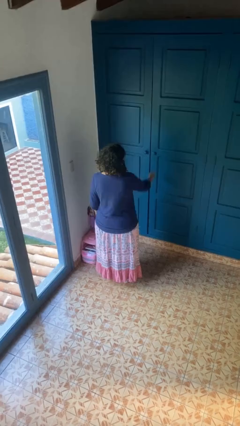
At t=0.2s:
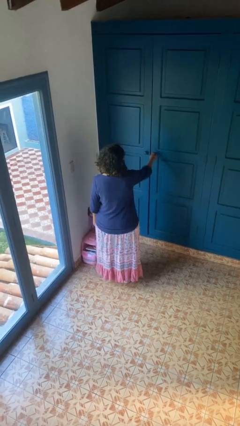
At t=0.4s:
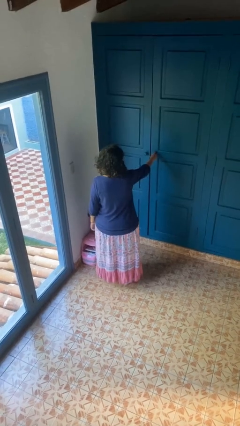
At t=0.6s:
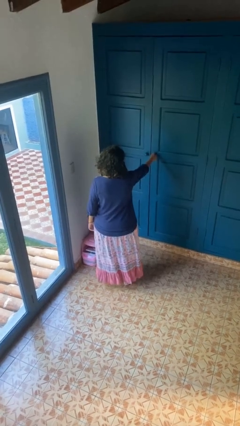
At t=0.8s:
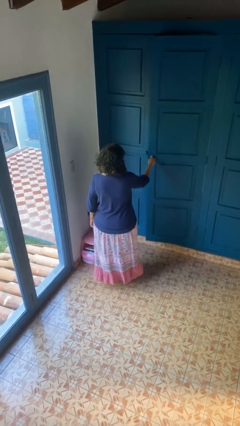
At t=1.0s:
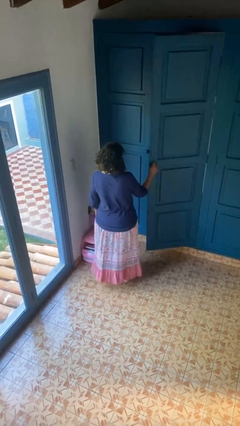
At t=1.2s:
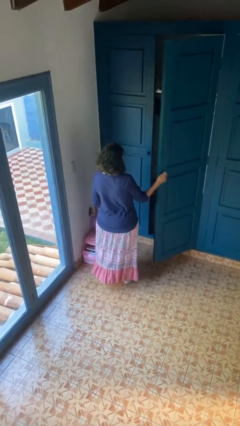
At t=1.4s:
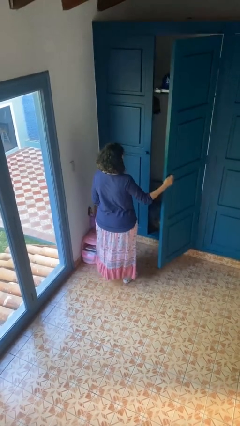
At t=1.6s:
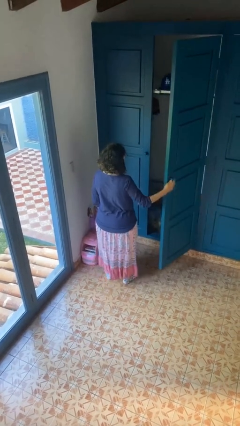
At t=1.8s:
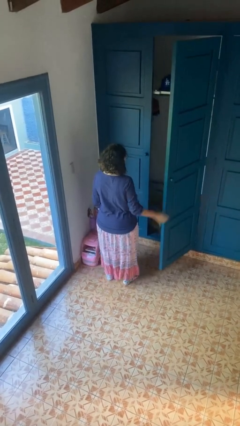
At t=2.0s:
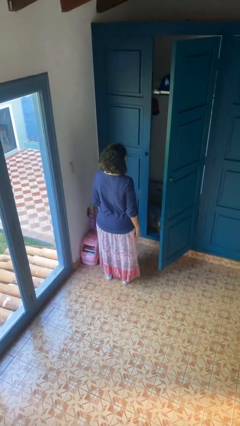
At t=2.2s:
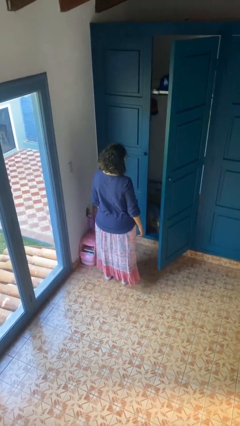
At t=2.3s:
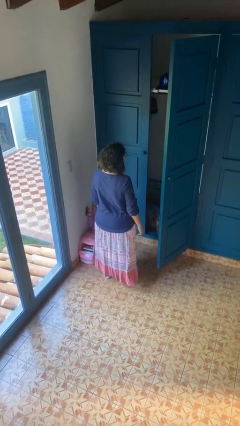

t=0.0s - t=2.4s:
person opens closet door

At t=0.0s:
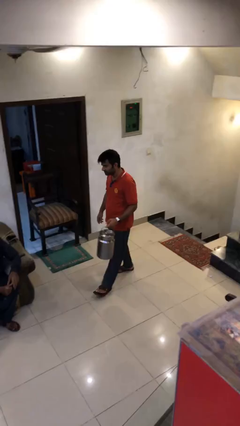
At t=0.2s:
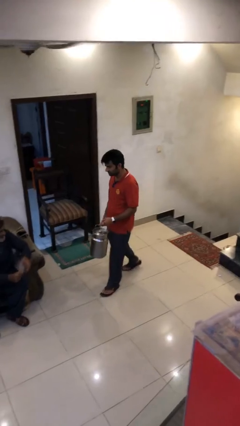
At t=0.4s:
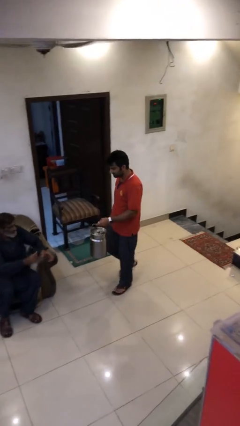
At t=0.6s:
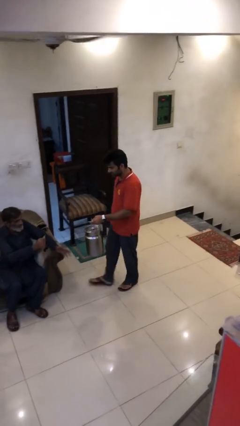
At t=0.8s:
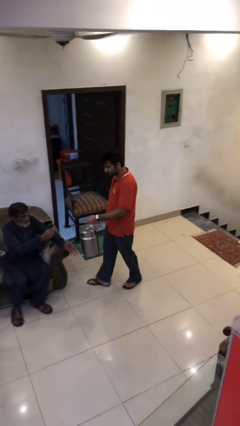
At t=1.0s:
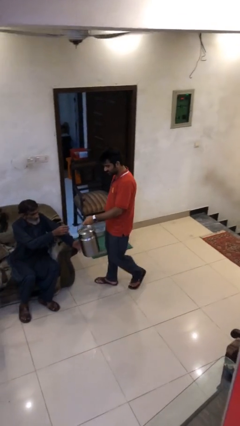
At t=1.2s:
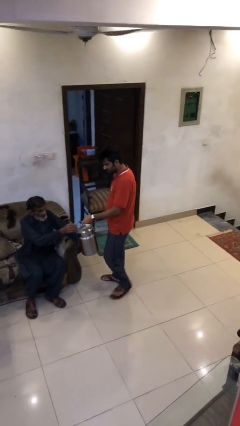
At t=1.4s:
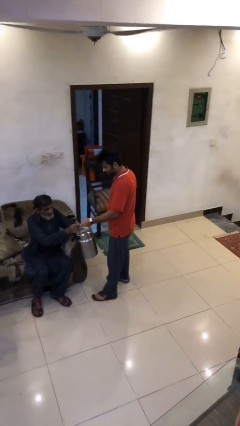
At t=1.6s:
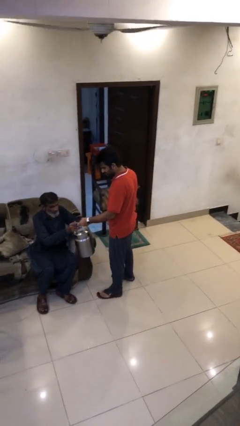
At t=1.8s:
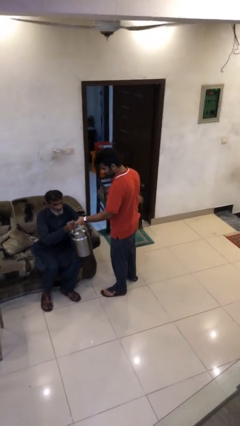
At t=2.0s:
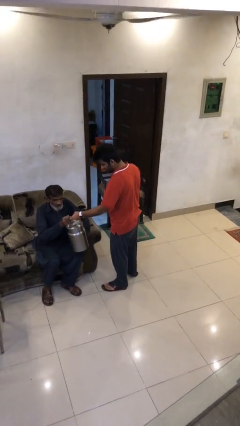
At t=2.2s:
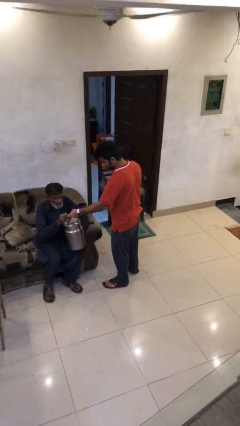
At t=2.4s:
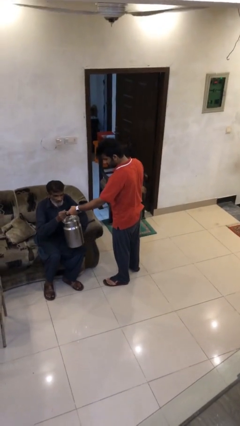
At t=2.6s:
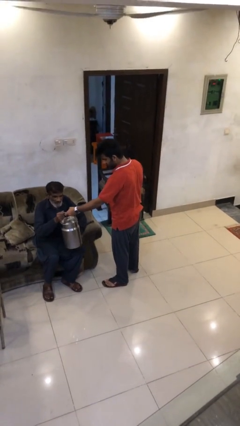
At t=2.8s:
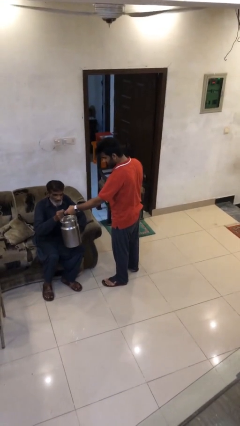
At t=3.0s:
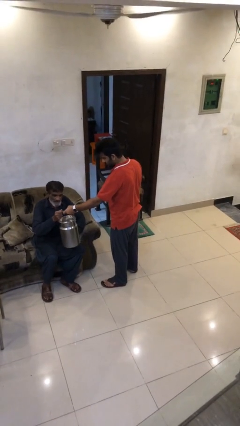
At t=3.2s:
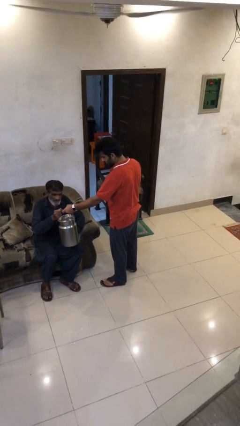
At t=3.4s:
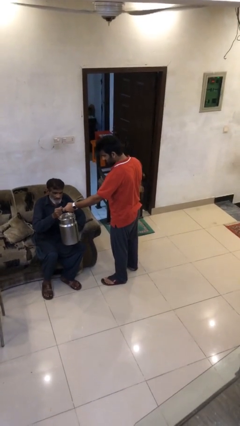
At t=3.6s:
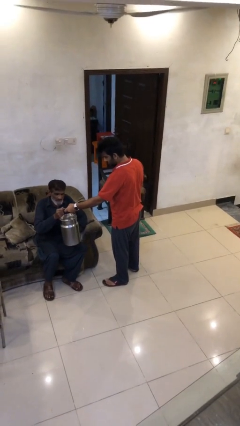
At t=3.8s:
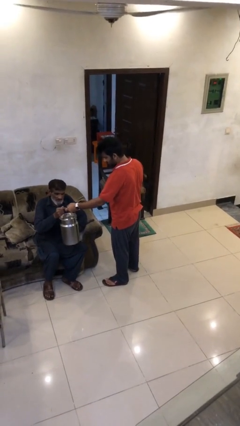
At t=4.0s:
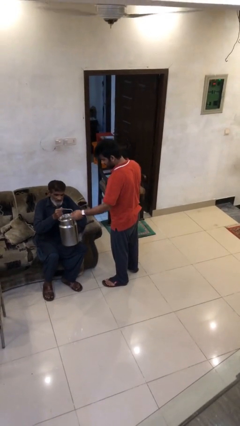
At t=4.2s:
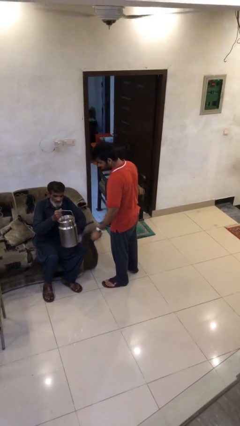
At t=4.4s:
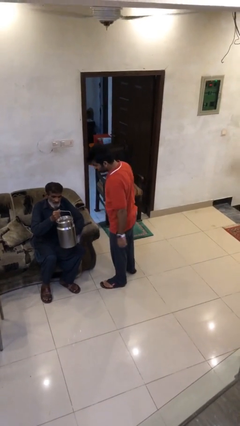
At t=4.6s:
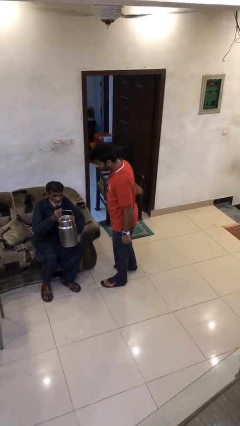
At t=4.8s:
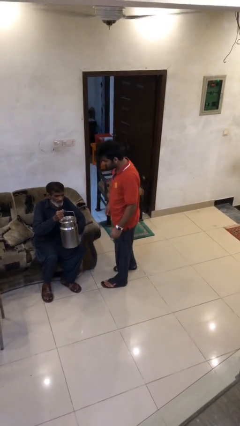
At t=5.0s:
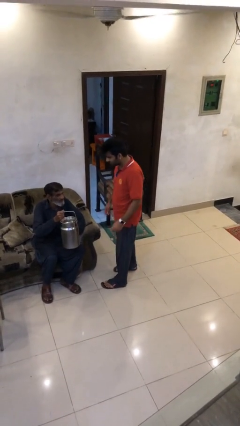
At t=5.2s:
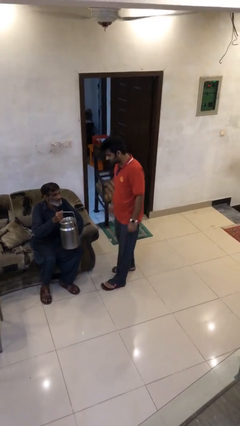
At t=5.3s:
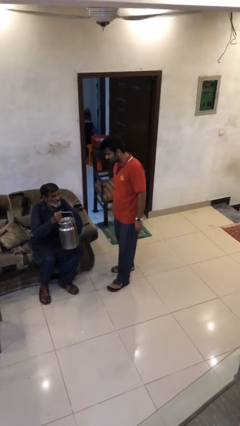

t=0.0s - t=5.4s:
person transfers object to person

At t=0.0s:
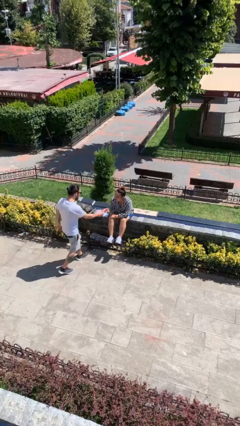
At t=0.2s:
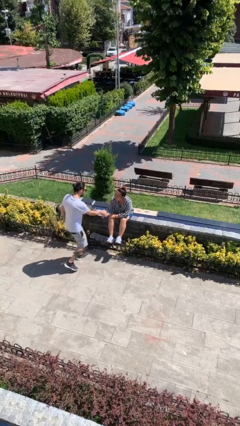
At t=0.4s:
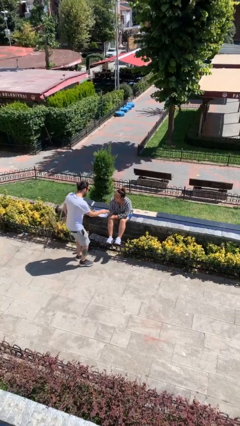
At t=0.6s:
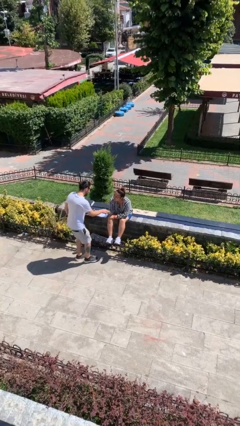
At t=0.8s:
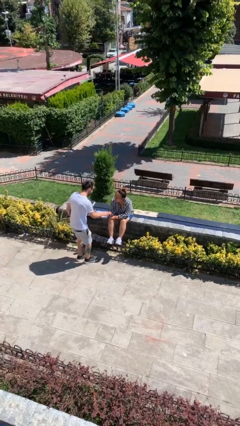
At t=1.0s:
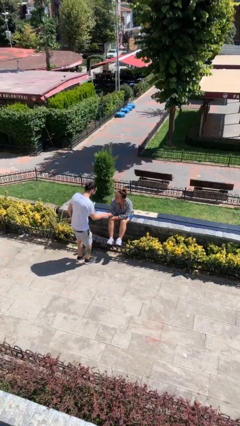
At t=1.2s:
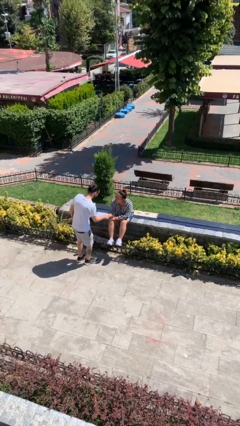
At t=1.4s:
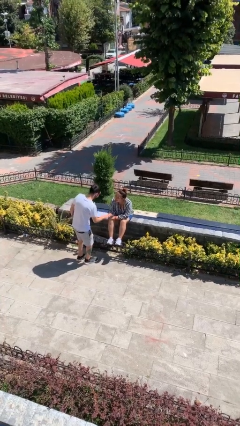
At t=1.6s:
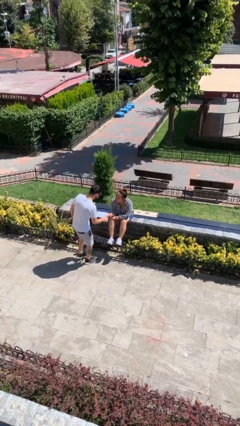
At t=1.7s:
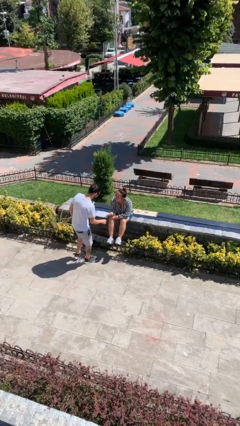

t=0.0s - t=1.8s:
person shakes hand

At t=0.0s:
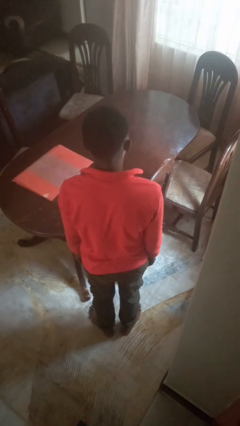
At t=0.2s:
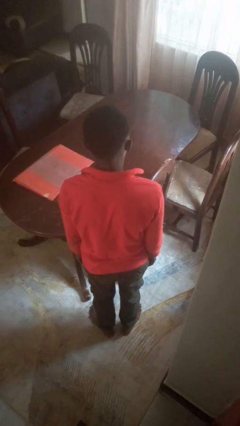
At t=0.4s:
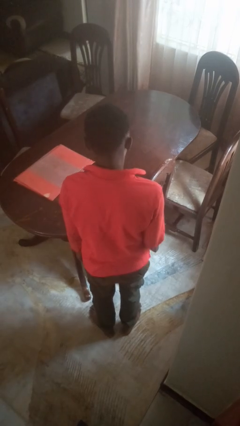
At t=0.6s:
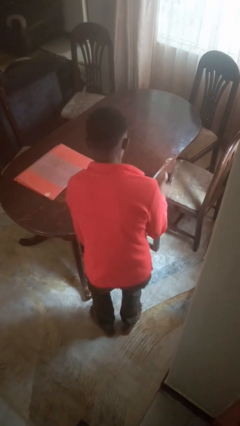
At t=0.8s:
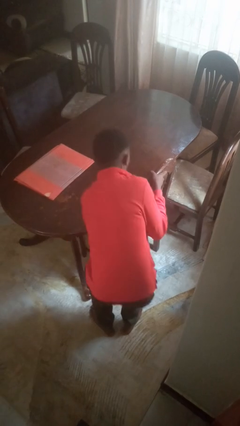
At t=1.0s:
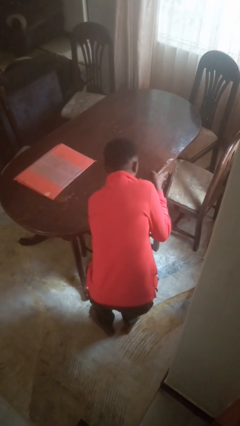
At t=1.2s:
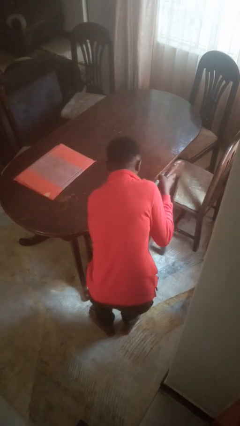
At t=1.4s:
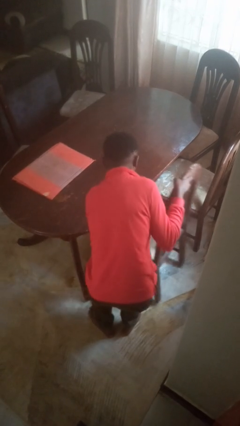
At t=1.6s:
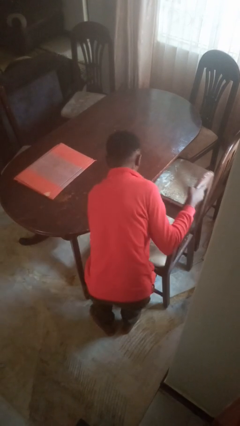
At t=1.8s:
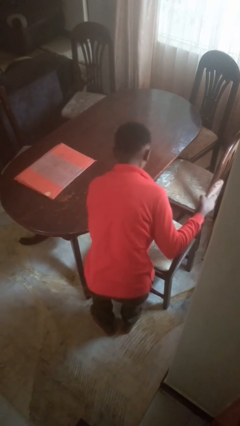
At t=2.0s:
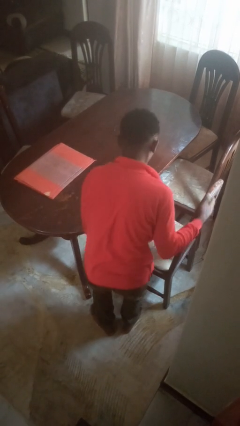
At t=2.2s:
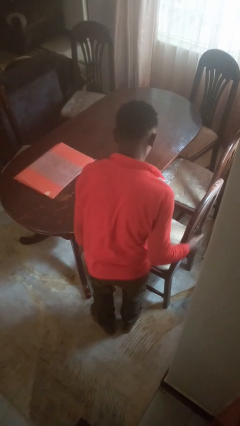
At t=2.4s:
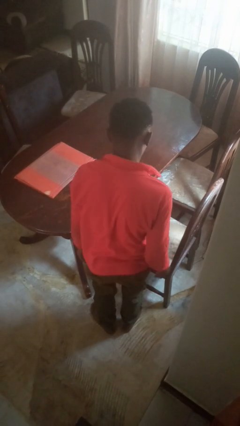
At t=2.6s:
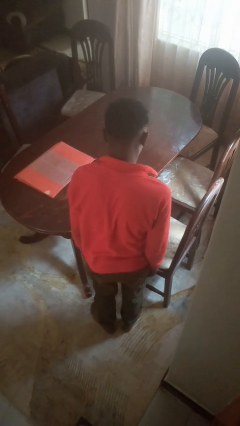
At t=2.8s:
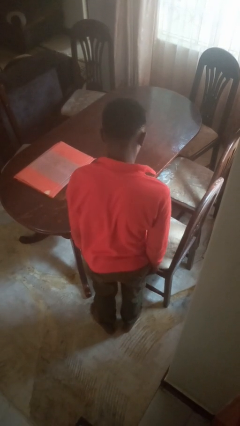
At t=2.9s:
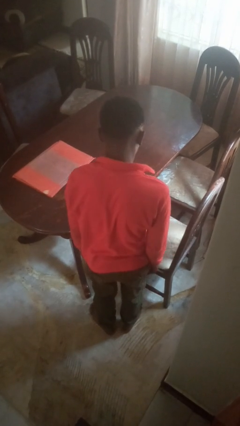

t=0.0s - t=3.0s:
person pulls out chair

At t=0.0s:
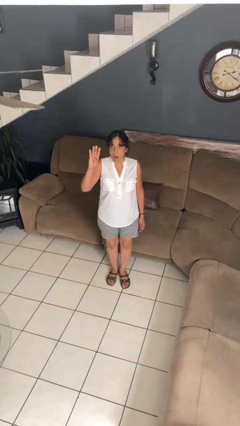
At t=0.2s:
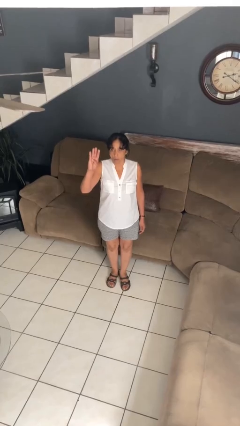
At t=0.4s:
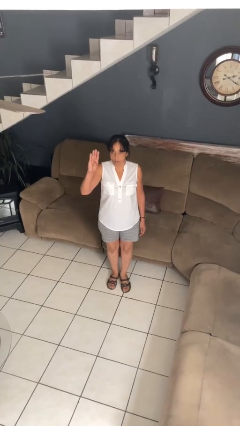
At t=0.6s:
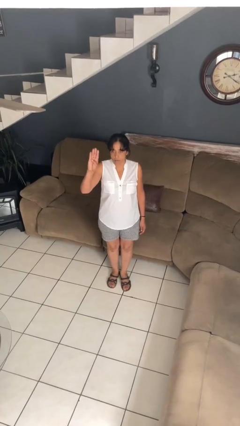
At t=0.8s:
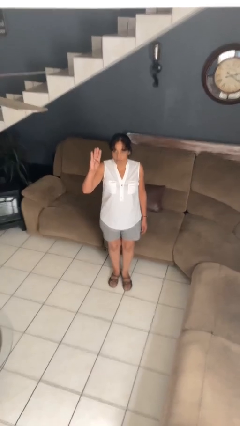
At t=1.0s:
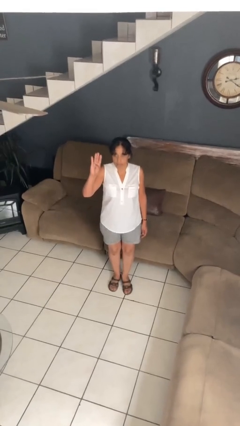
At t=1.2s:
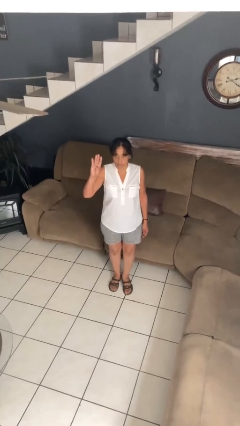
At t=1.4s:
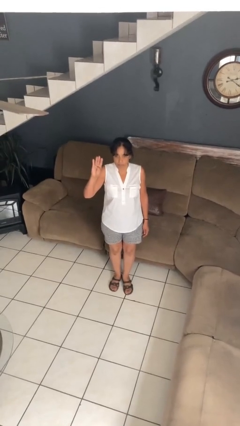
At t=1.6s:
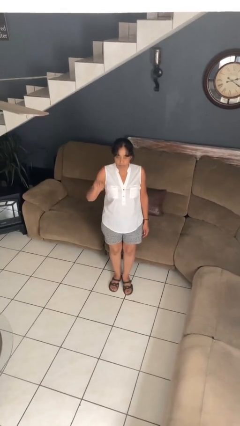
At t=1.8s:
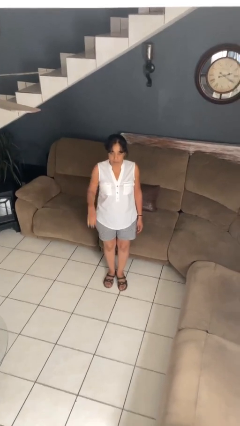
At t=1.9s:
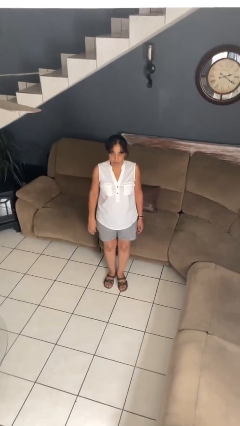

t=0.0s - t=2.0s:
person gestures number four

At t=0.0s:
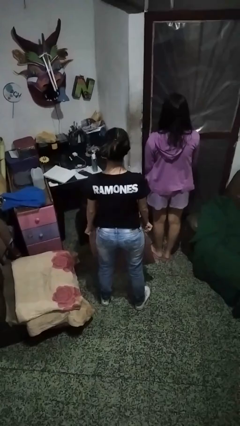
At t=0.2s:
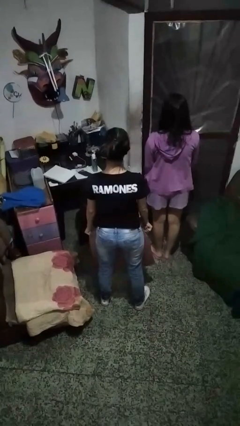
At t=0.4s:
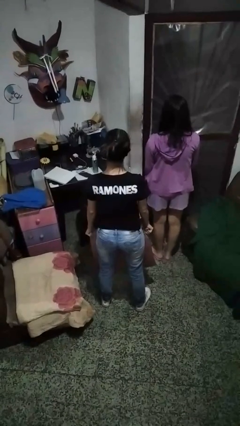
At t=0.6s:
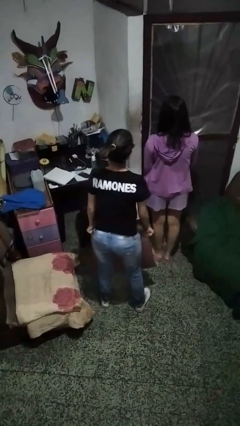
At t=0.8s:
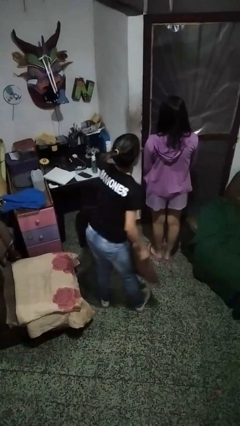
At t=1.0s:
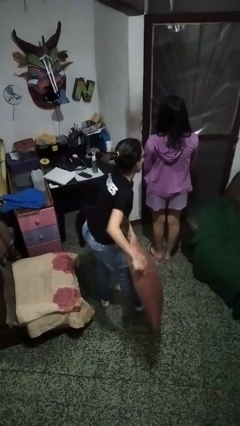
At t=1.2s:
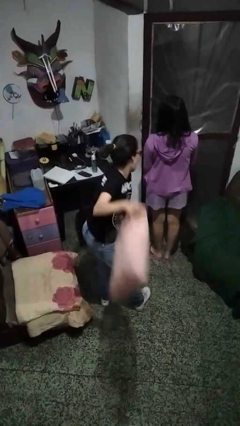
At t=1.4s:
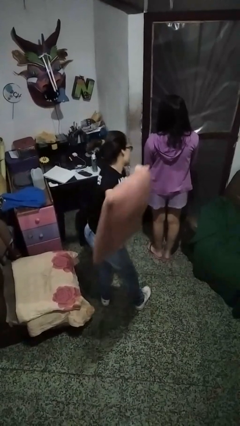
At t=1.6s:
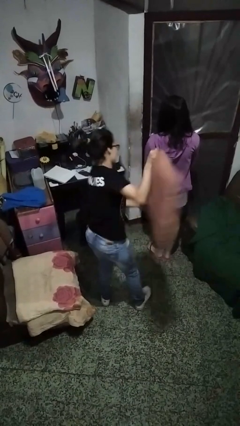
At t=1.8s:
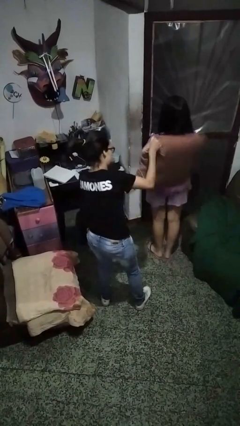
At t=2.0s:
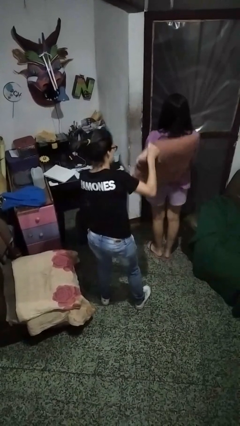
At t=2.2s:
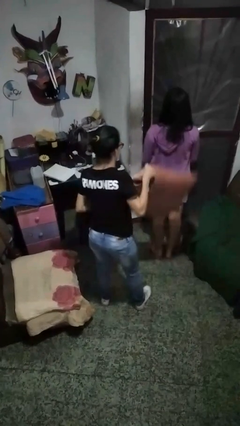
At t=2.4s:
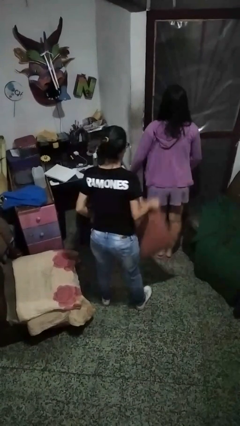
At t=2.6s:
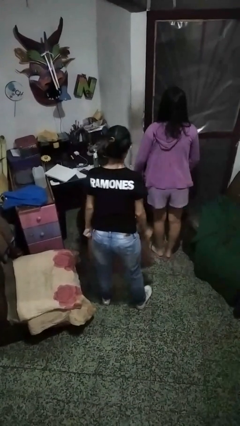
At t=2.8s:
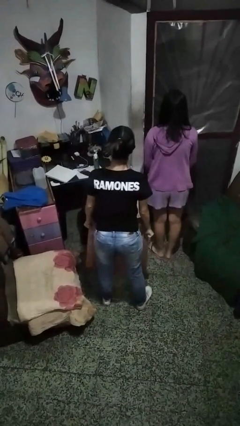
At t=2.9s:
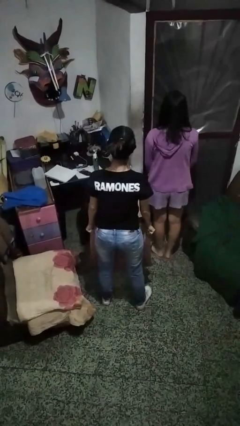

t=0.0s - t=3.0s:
person hits person with pillow
